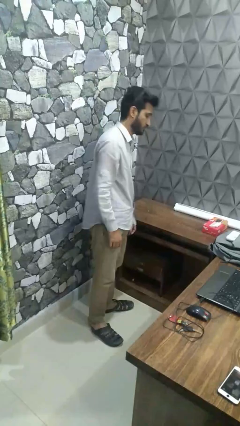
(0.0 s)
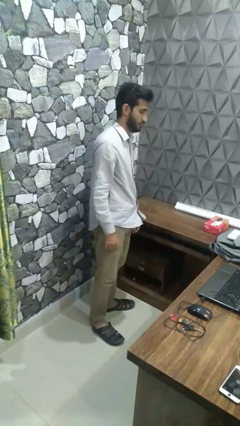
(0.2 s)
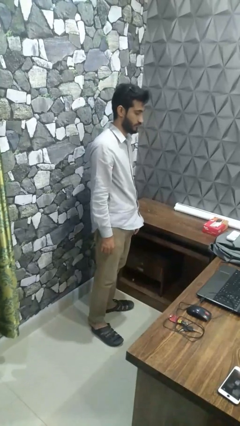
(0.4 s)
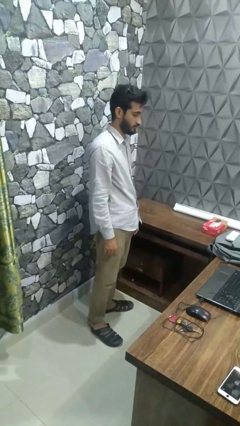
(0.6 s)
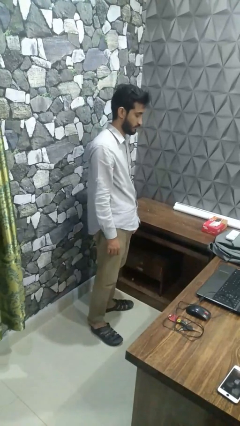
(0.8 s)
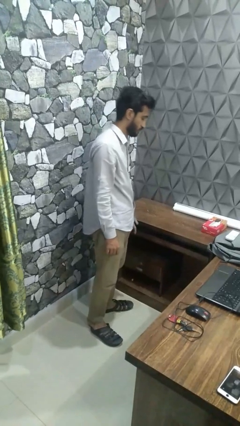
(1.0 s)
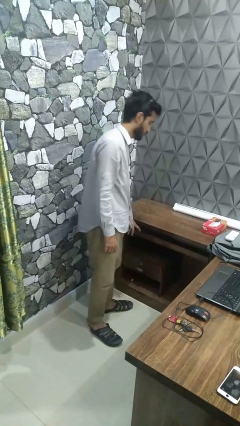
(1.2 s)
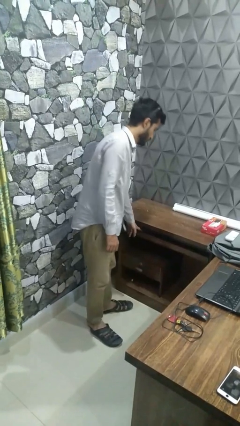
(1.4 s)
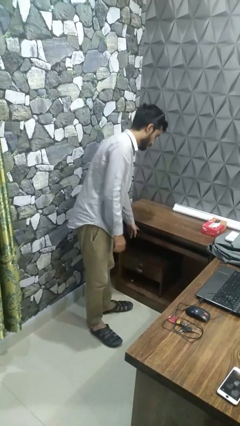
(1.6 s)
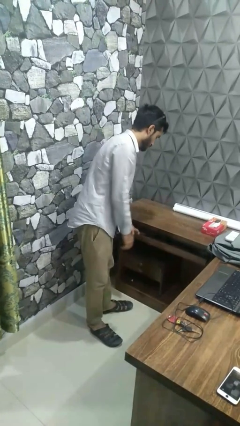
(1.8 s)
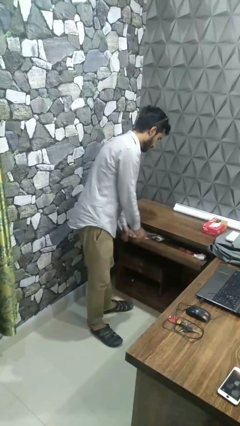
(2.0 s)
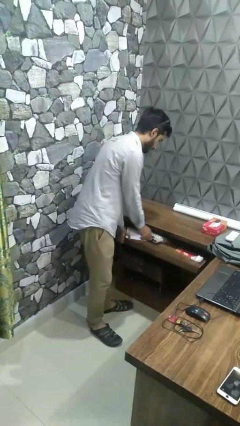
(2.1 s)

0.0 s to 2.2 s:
person takes clothes from dresser

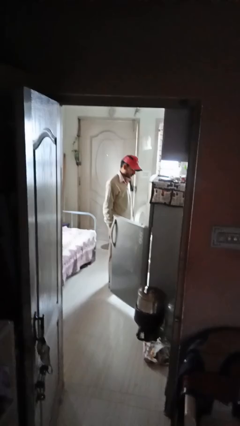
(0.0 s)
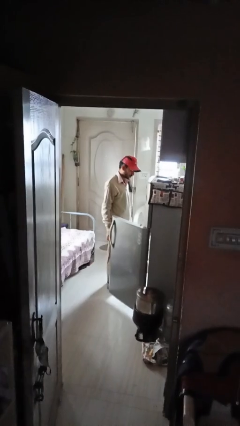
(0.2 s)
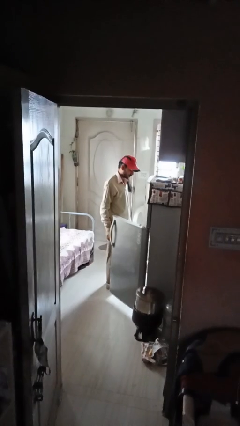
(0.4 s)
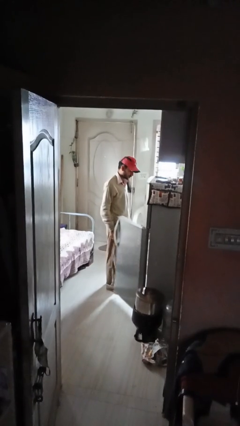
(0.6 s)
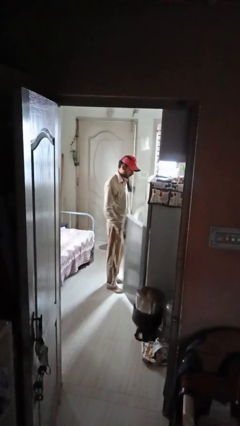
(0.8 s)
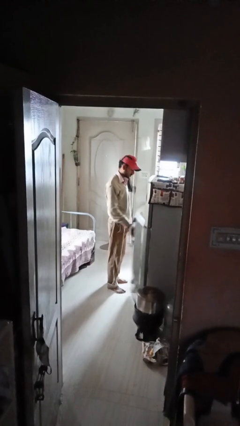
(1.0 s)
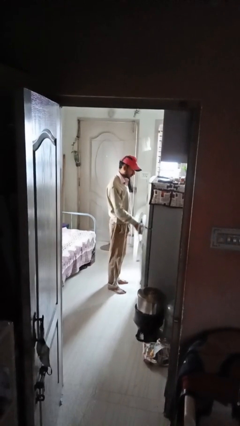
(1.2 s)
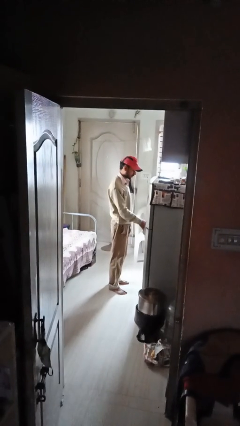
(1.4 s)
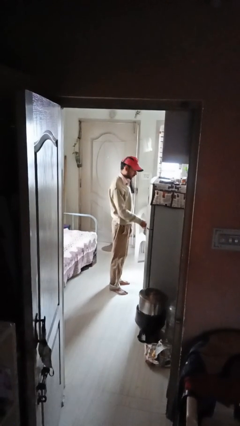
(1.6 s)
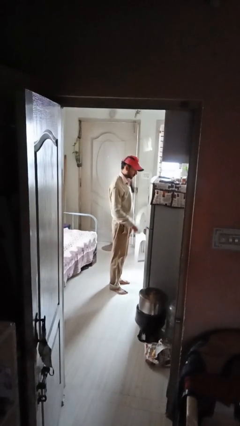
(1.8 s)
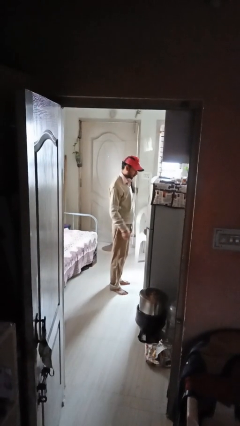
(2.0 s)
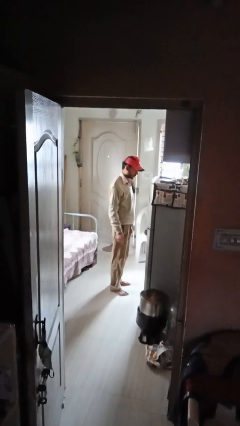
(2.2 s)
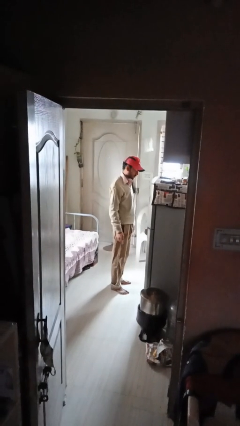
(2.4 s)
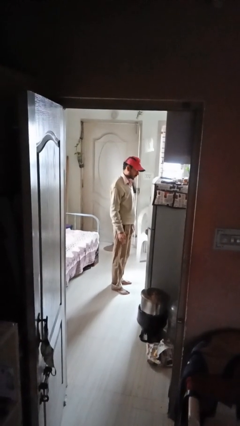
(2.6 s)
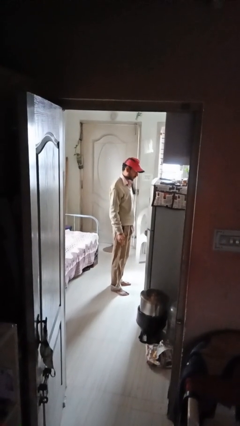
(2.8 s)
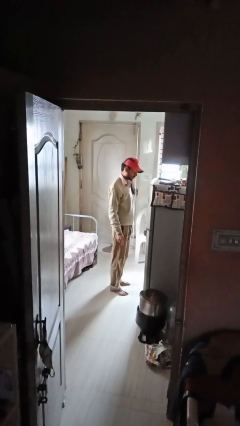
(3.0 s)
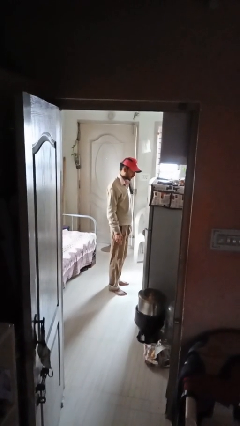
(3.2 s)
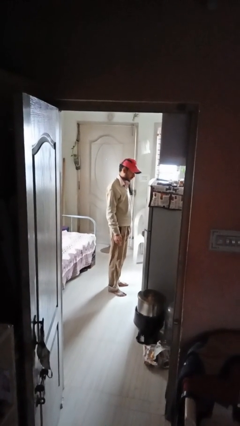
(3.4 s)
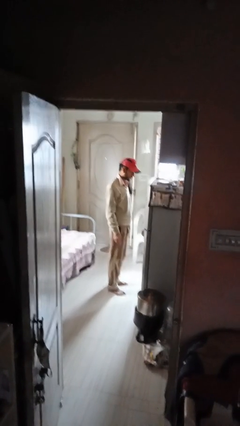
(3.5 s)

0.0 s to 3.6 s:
person closes refrigerator

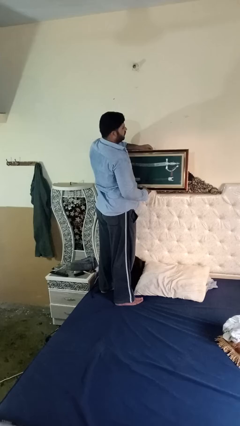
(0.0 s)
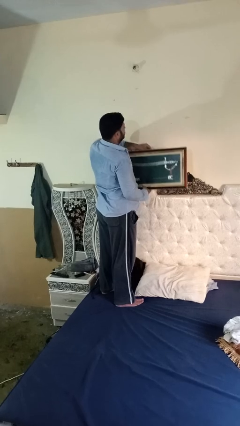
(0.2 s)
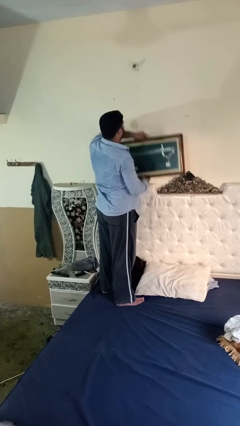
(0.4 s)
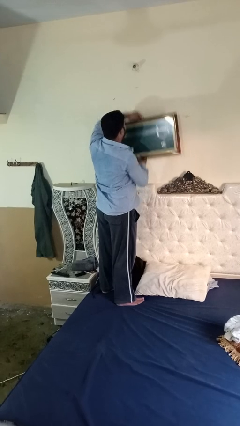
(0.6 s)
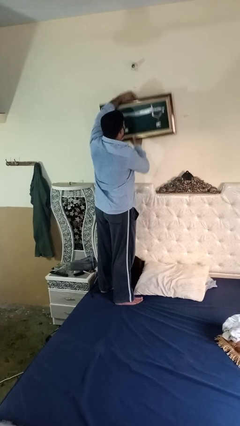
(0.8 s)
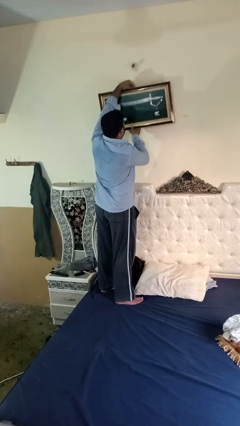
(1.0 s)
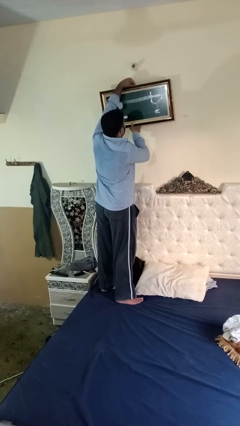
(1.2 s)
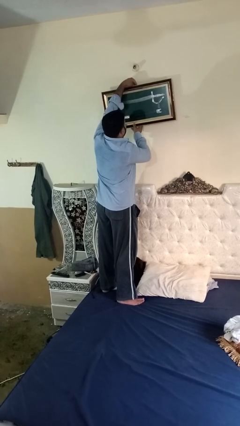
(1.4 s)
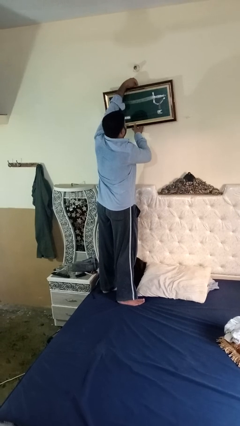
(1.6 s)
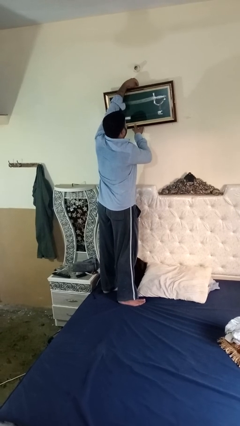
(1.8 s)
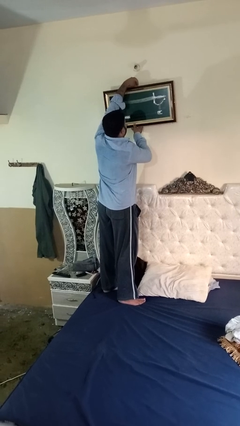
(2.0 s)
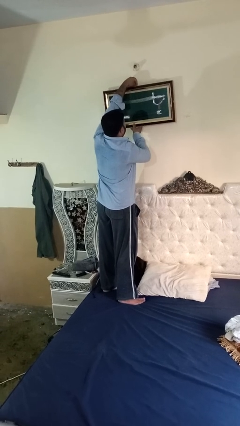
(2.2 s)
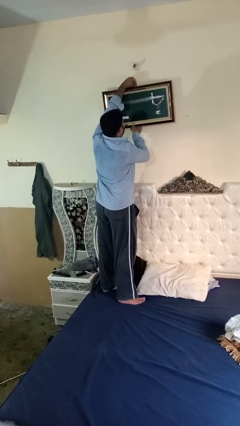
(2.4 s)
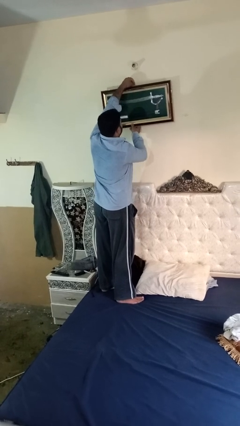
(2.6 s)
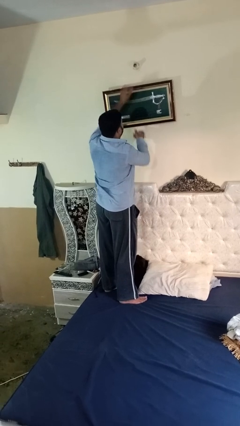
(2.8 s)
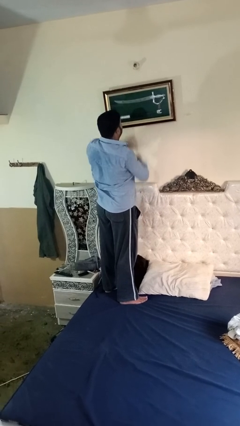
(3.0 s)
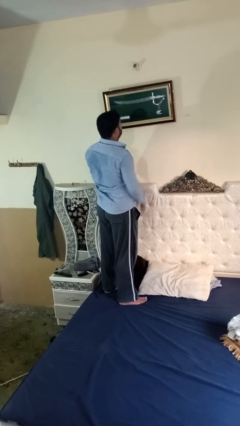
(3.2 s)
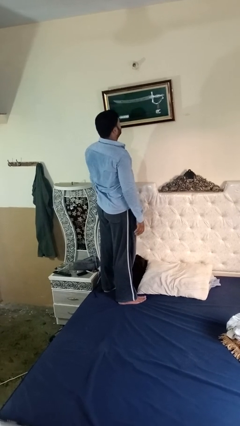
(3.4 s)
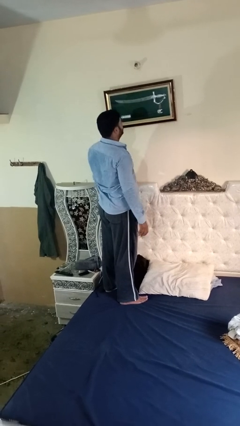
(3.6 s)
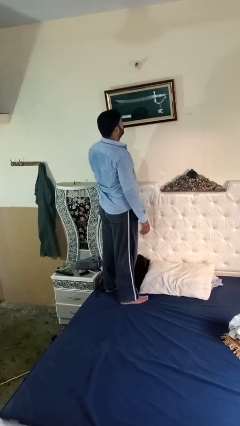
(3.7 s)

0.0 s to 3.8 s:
person puts up picture frame

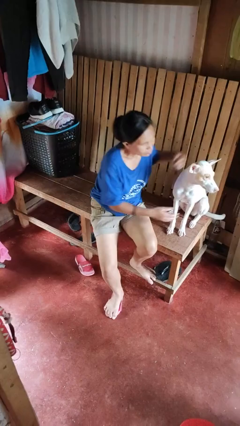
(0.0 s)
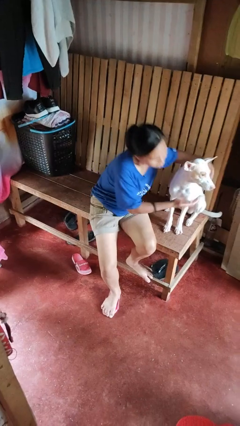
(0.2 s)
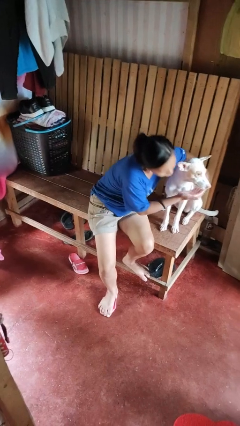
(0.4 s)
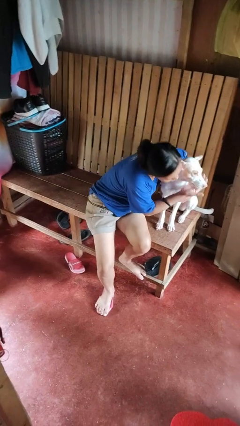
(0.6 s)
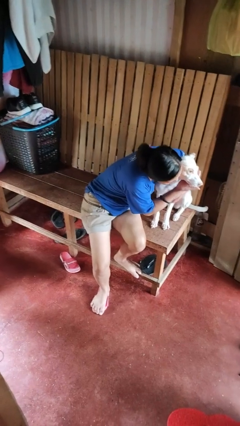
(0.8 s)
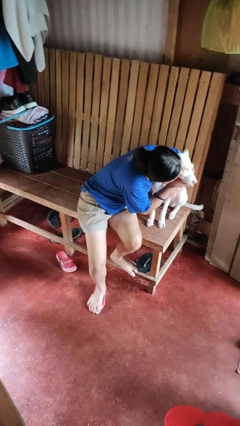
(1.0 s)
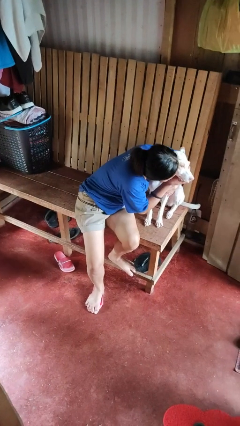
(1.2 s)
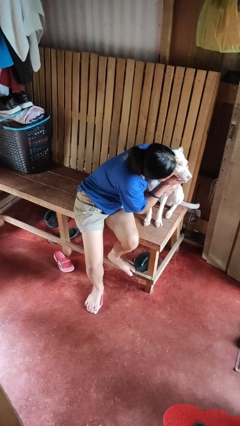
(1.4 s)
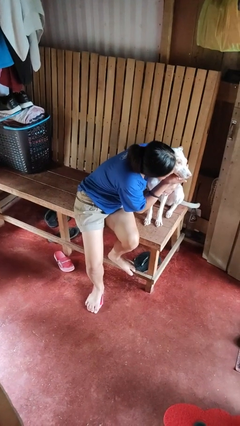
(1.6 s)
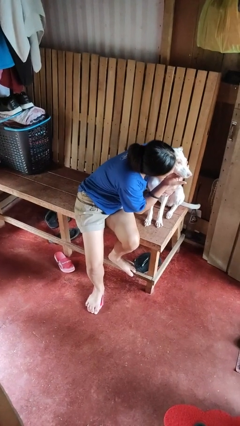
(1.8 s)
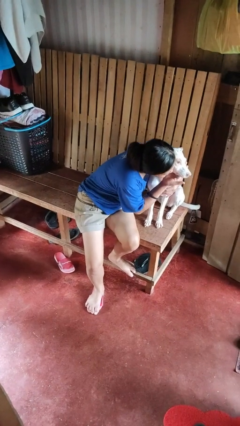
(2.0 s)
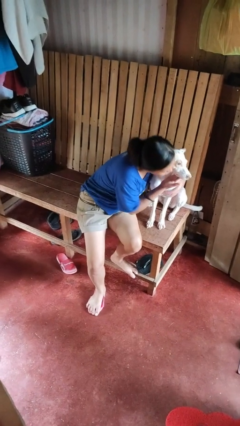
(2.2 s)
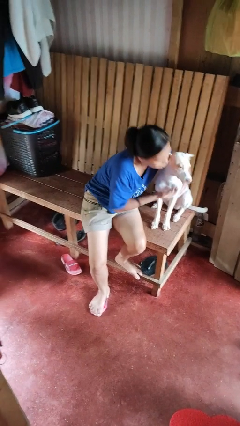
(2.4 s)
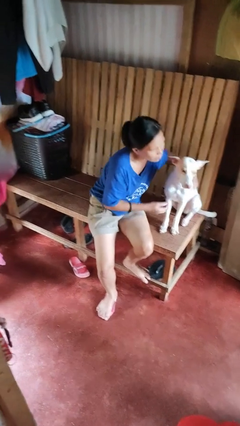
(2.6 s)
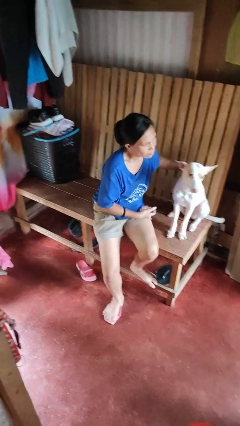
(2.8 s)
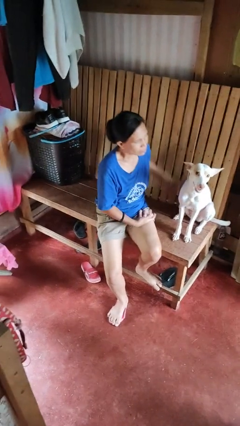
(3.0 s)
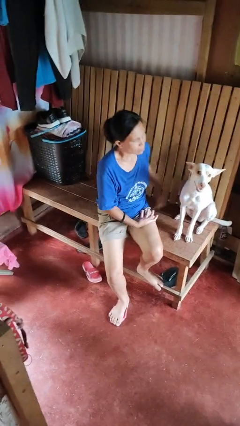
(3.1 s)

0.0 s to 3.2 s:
person hugs dog

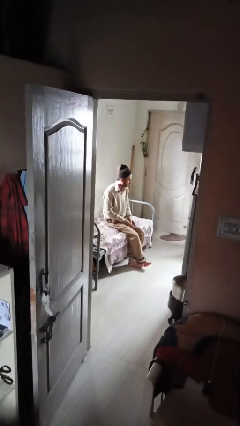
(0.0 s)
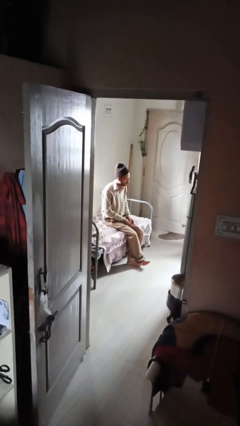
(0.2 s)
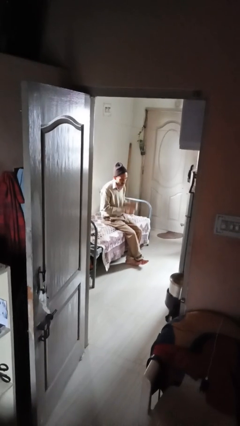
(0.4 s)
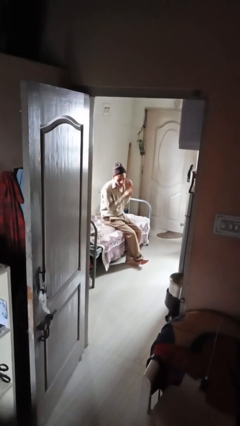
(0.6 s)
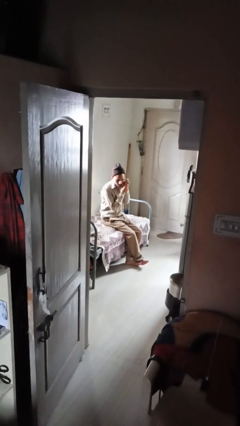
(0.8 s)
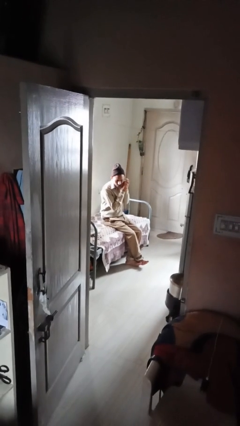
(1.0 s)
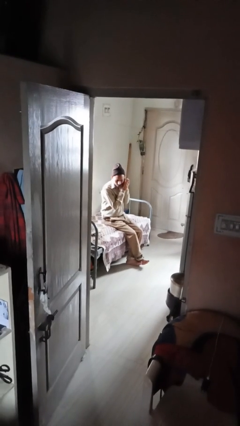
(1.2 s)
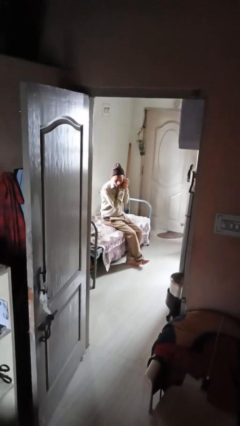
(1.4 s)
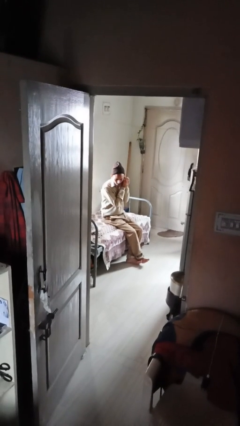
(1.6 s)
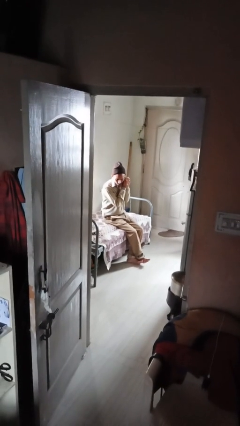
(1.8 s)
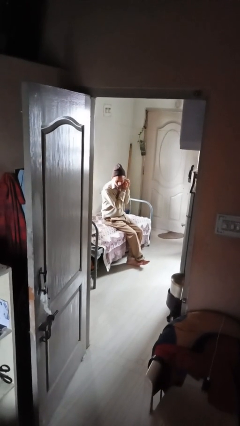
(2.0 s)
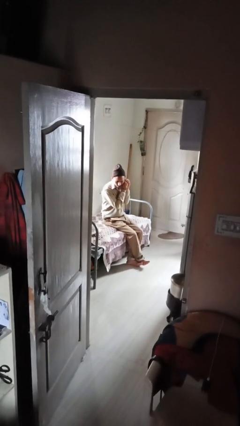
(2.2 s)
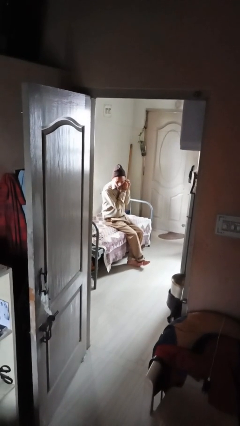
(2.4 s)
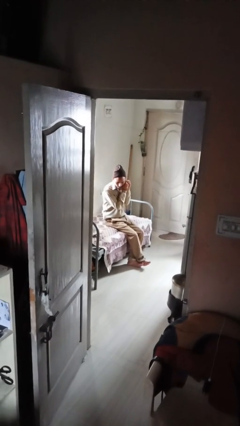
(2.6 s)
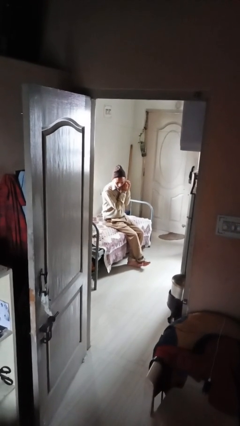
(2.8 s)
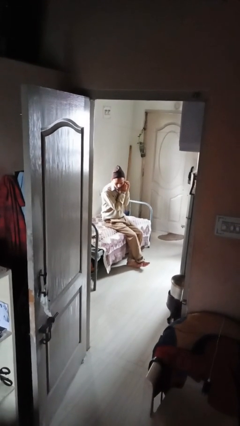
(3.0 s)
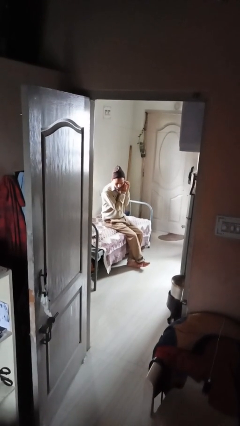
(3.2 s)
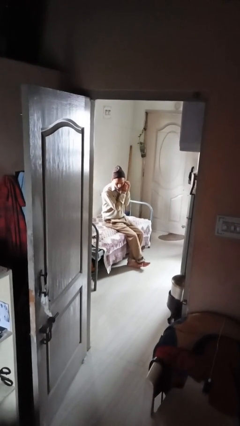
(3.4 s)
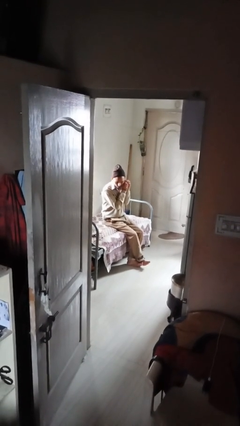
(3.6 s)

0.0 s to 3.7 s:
person puts on earrings

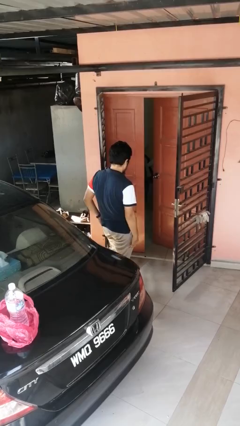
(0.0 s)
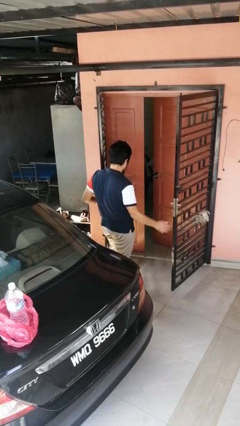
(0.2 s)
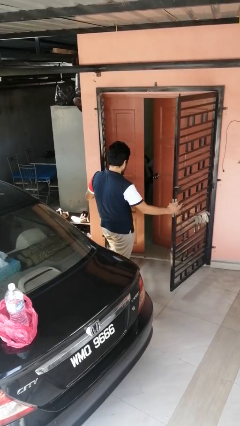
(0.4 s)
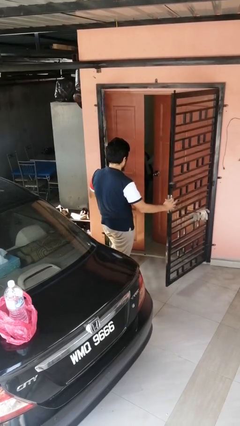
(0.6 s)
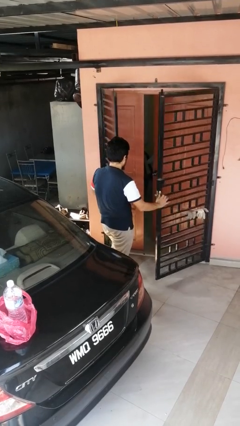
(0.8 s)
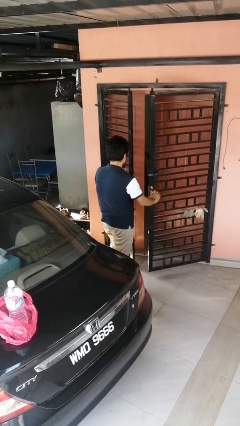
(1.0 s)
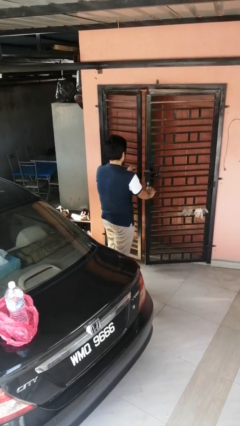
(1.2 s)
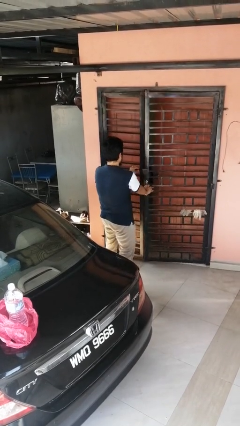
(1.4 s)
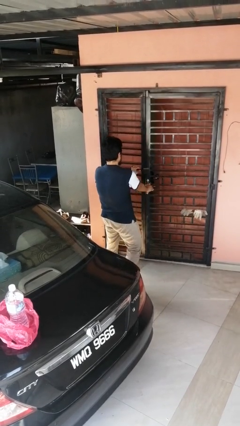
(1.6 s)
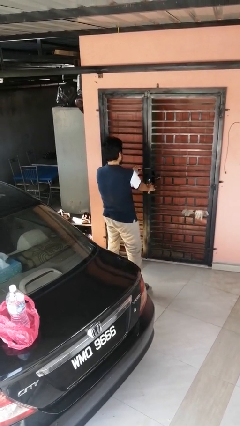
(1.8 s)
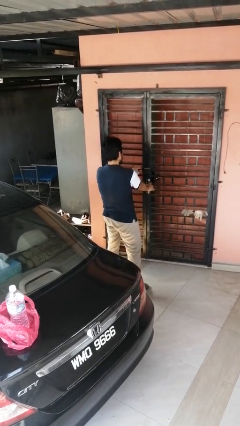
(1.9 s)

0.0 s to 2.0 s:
person closes gate
